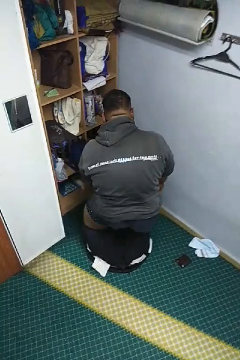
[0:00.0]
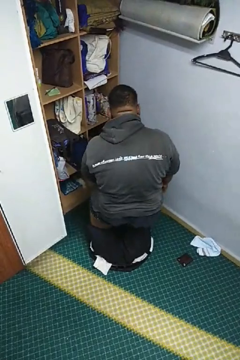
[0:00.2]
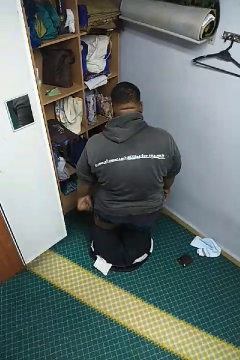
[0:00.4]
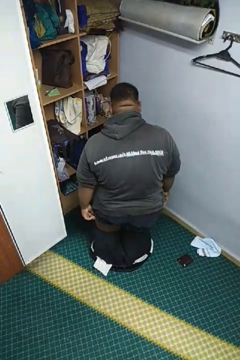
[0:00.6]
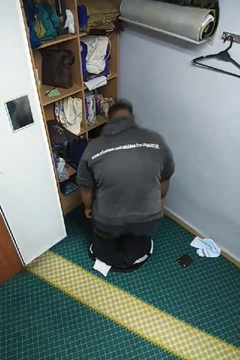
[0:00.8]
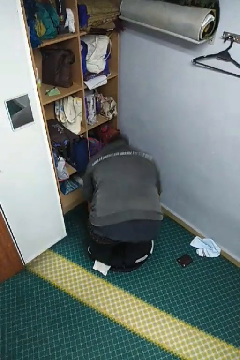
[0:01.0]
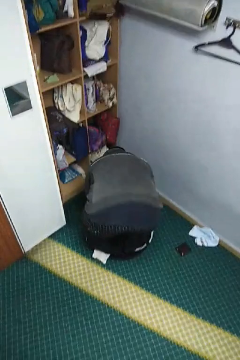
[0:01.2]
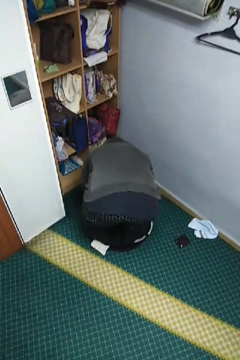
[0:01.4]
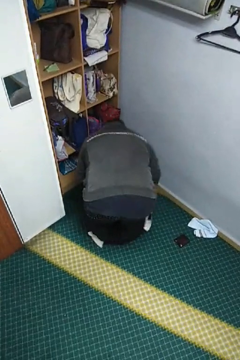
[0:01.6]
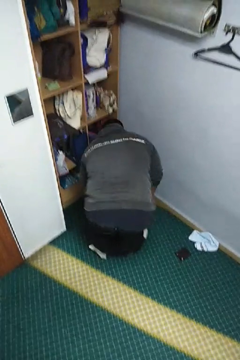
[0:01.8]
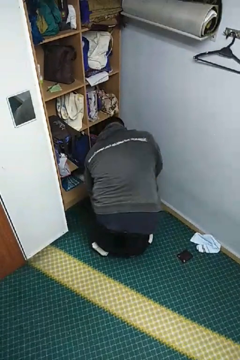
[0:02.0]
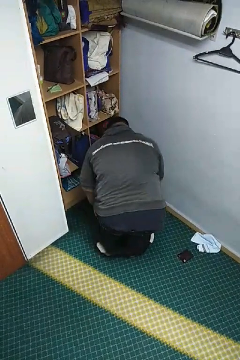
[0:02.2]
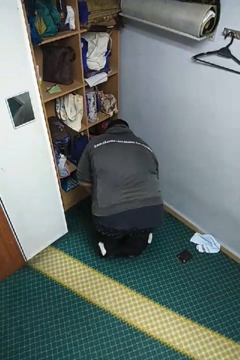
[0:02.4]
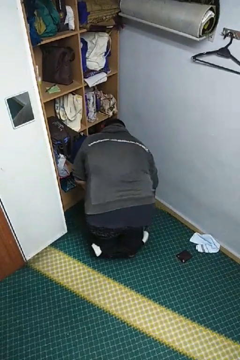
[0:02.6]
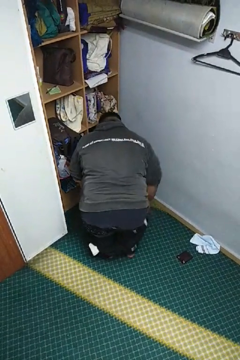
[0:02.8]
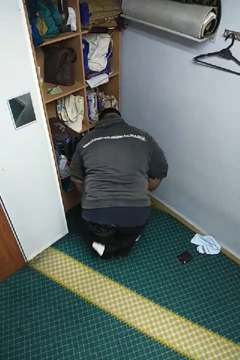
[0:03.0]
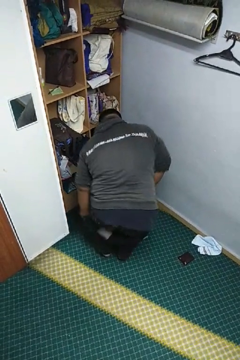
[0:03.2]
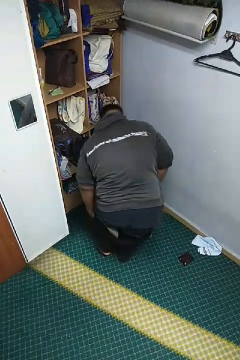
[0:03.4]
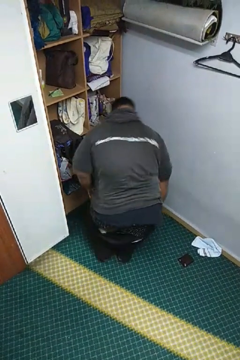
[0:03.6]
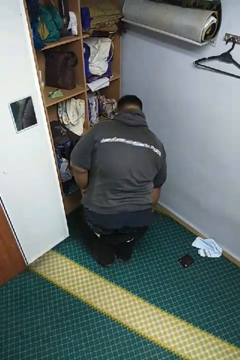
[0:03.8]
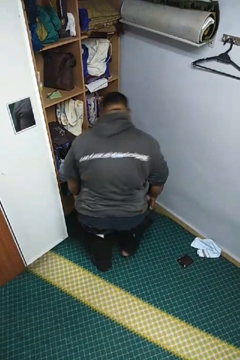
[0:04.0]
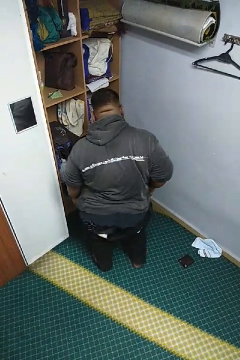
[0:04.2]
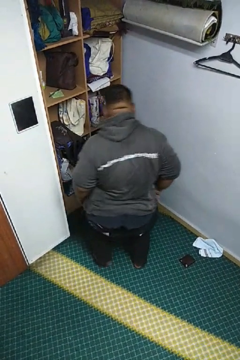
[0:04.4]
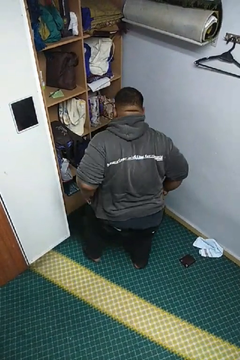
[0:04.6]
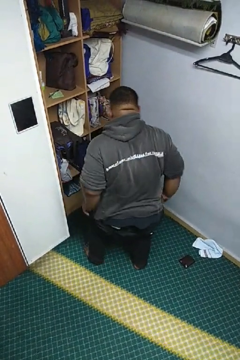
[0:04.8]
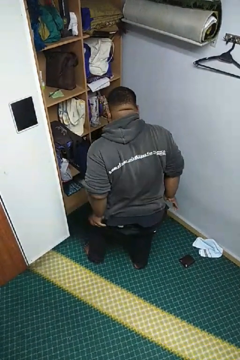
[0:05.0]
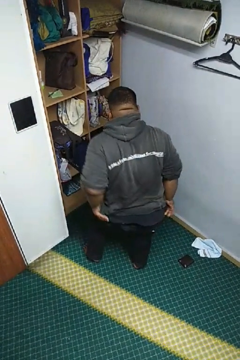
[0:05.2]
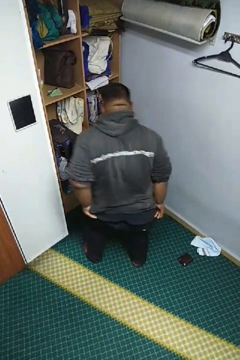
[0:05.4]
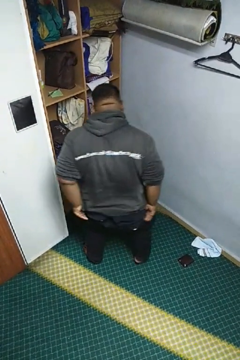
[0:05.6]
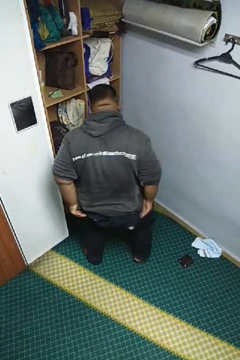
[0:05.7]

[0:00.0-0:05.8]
person puts on pants

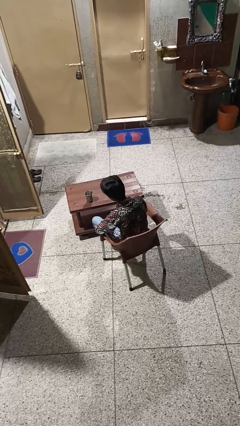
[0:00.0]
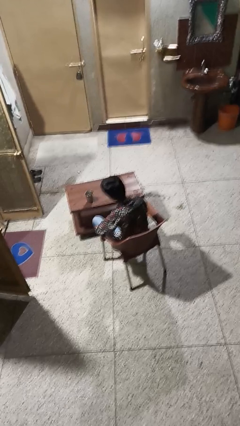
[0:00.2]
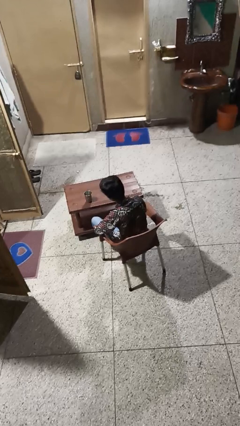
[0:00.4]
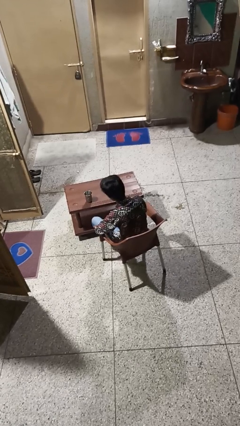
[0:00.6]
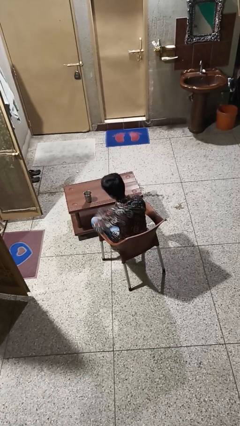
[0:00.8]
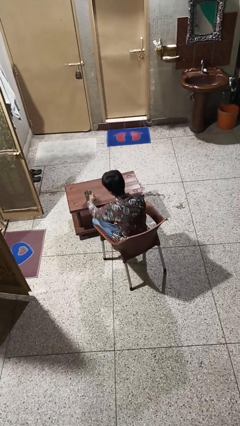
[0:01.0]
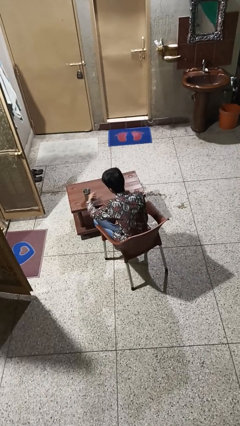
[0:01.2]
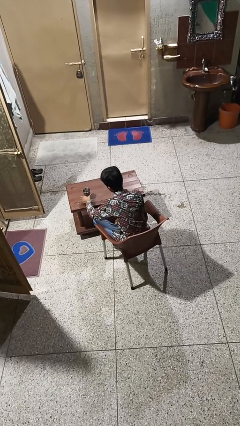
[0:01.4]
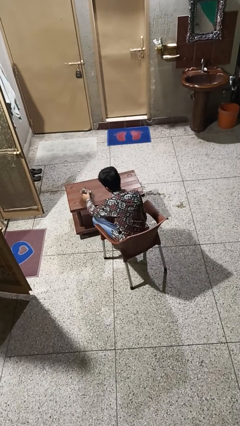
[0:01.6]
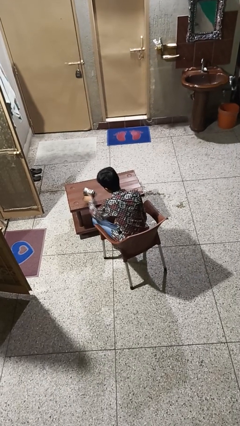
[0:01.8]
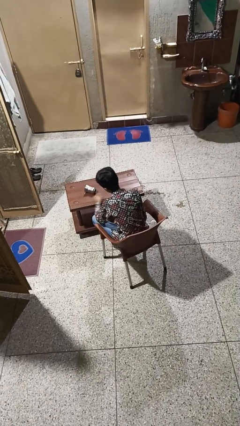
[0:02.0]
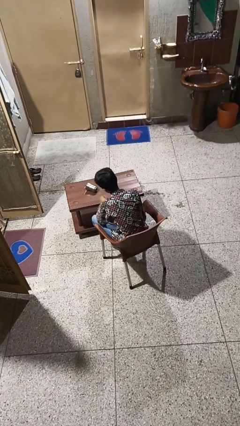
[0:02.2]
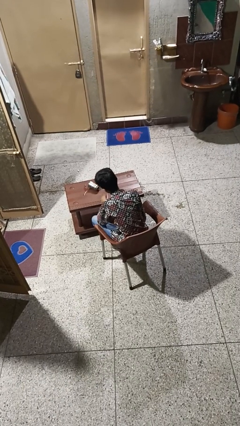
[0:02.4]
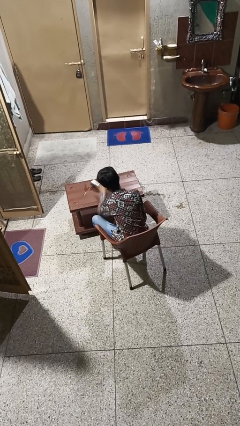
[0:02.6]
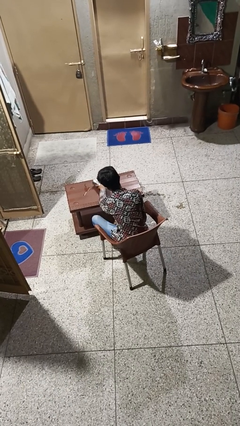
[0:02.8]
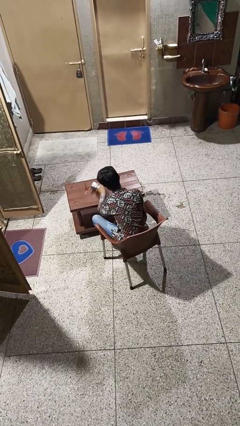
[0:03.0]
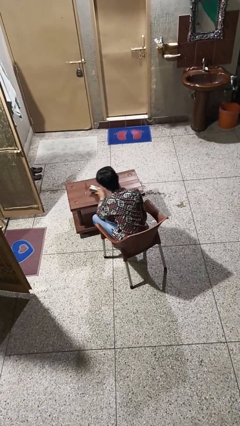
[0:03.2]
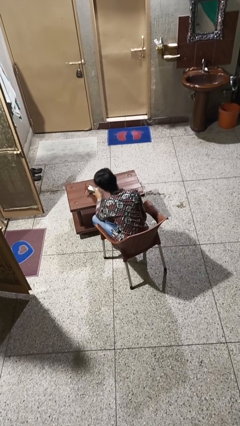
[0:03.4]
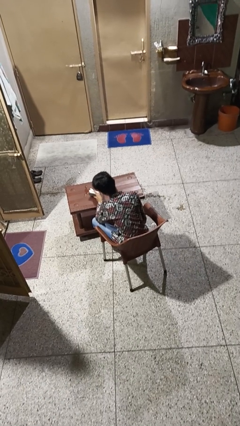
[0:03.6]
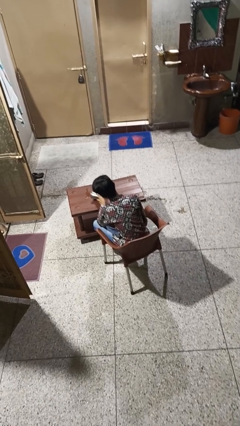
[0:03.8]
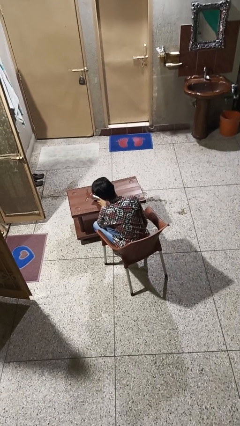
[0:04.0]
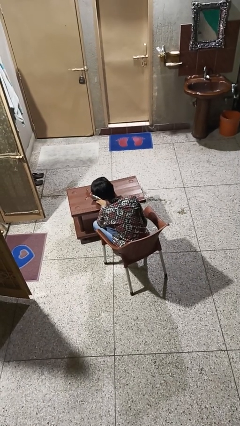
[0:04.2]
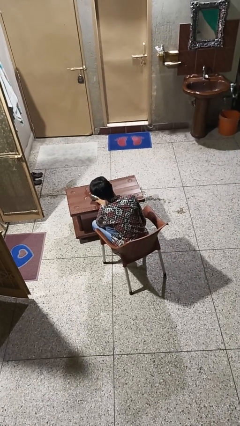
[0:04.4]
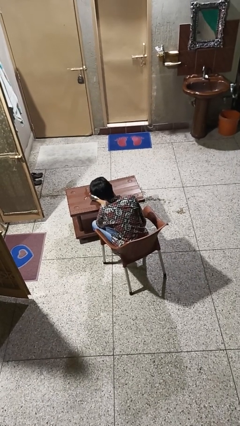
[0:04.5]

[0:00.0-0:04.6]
person spills on table

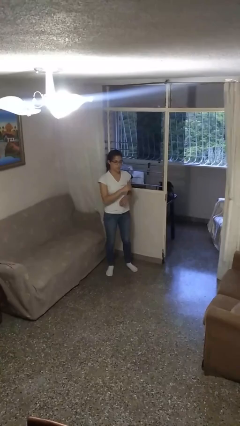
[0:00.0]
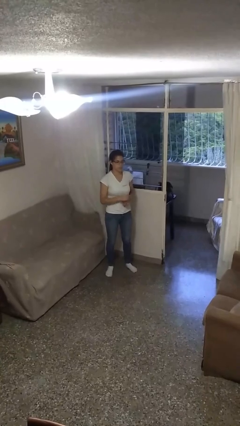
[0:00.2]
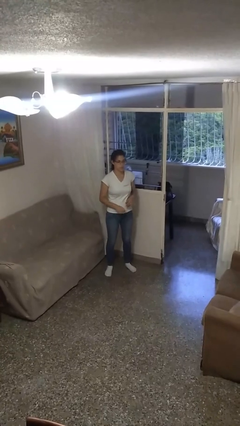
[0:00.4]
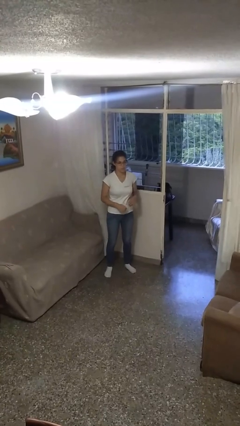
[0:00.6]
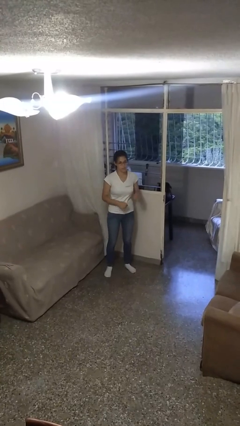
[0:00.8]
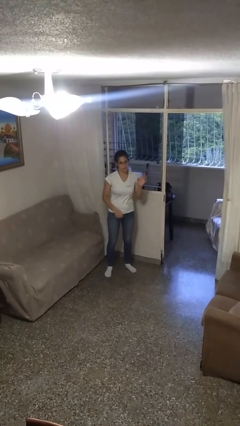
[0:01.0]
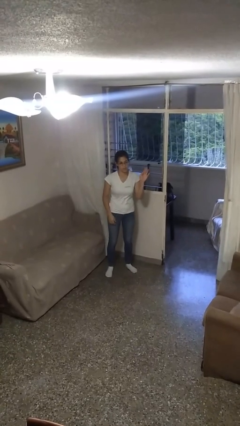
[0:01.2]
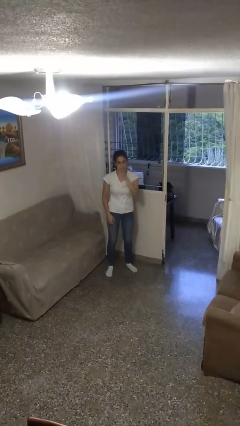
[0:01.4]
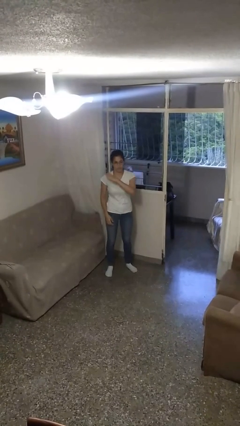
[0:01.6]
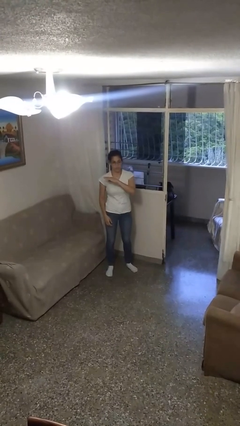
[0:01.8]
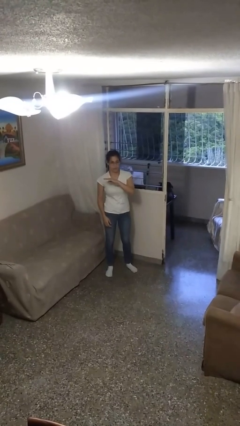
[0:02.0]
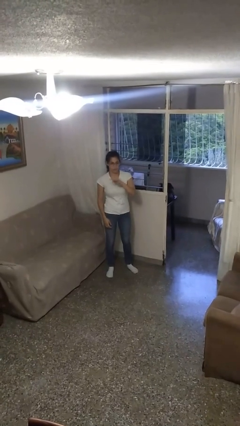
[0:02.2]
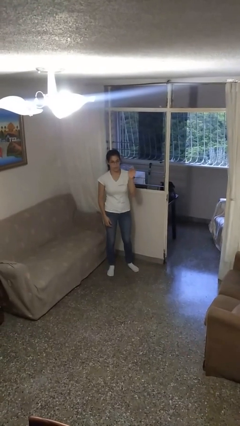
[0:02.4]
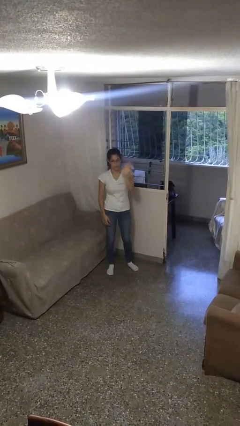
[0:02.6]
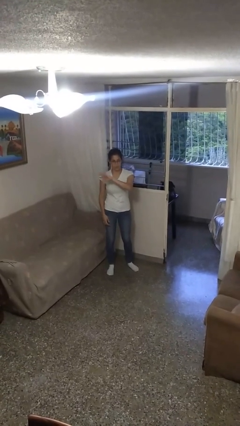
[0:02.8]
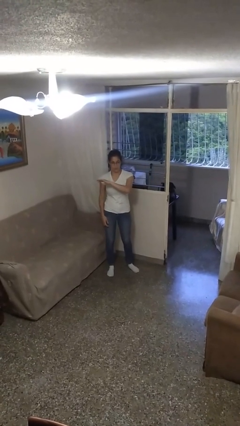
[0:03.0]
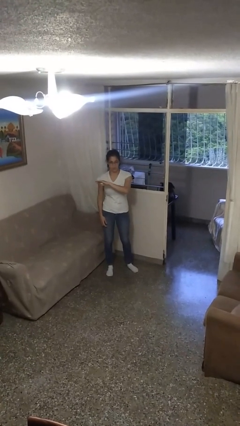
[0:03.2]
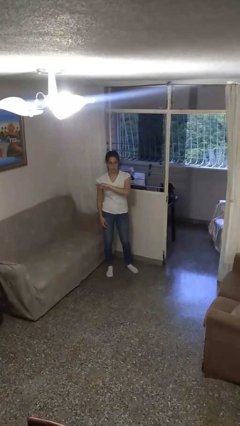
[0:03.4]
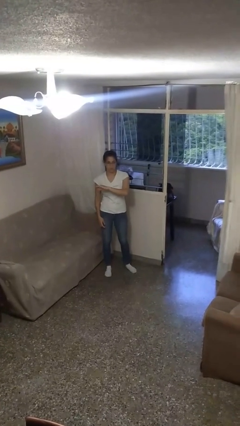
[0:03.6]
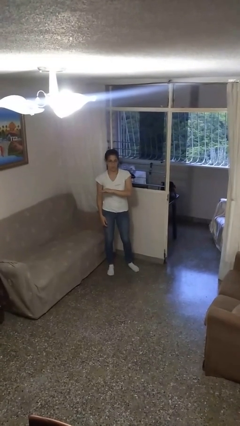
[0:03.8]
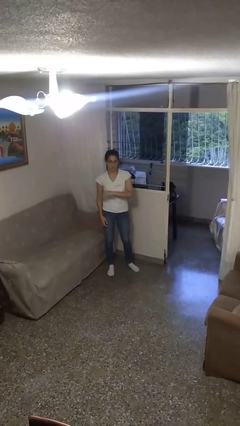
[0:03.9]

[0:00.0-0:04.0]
person gestures swipe right

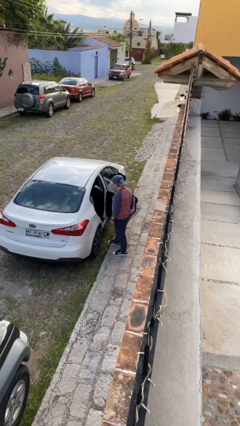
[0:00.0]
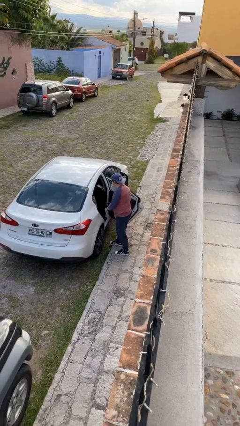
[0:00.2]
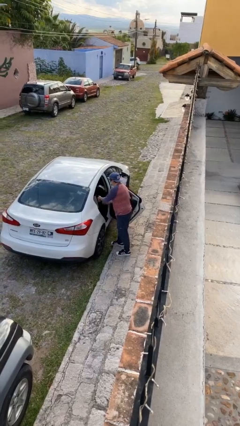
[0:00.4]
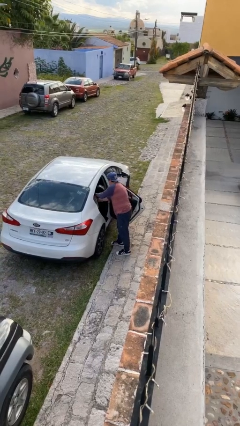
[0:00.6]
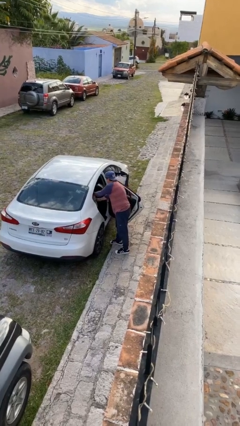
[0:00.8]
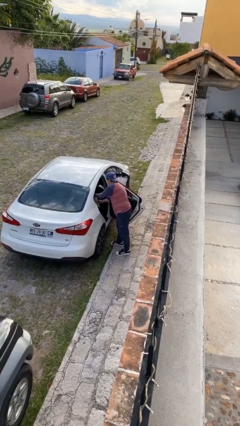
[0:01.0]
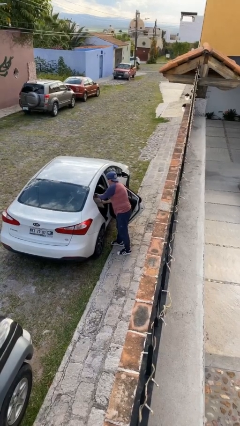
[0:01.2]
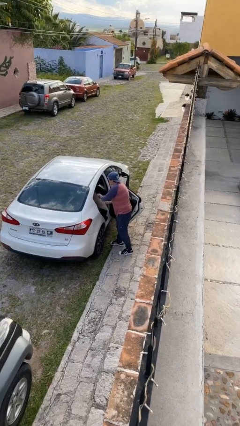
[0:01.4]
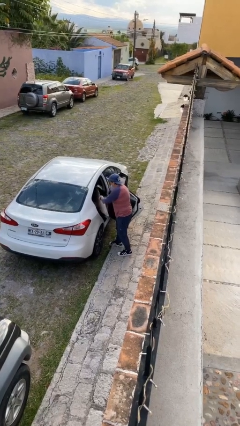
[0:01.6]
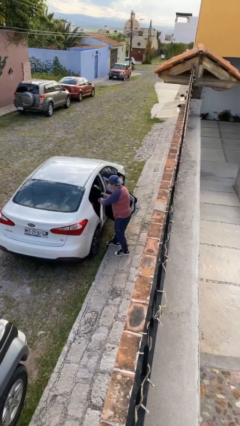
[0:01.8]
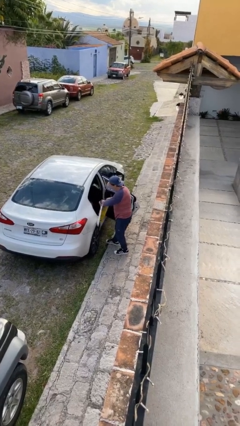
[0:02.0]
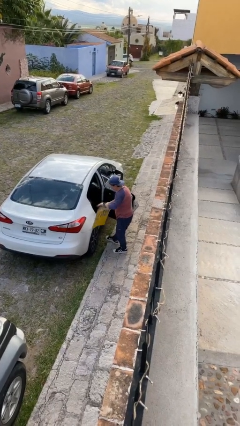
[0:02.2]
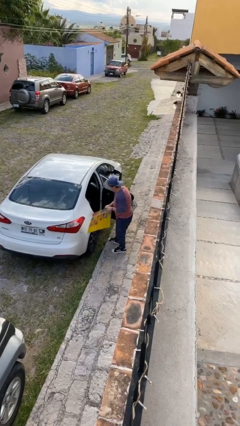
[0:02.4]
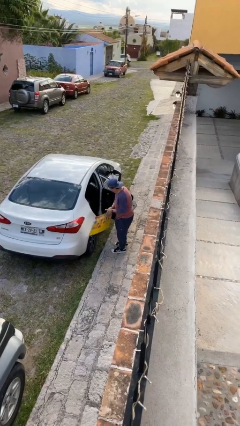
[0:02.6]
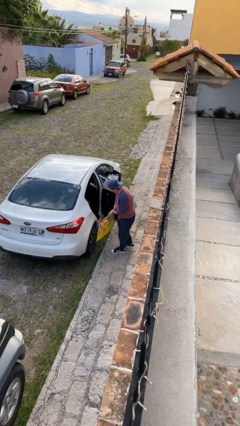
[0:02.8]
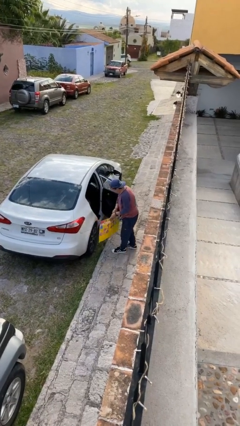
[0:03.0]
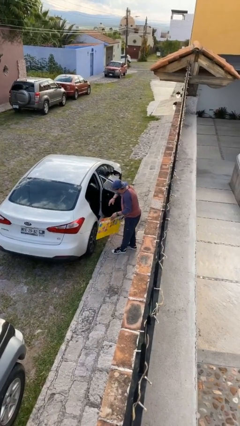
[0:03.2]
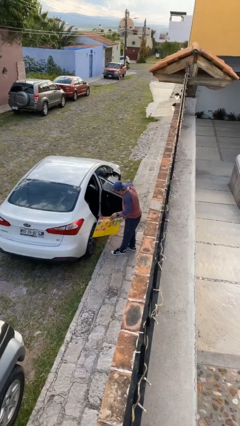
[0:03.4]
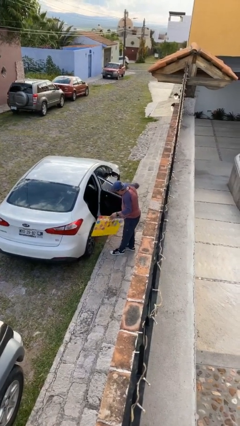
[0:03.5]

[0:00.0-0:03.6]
person unloads car

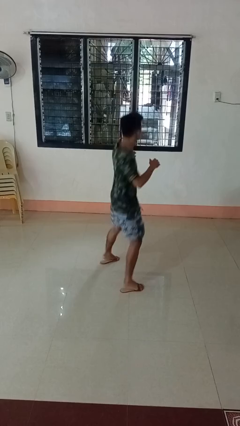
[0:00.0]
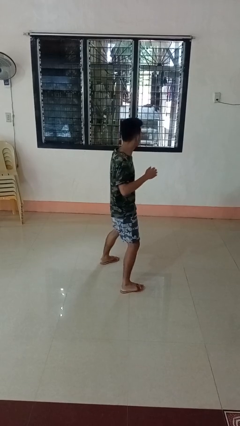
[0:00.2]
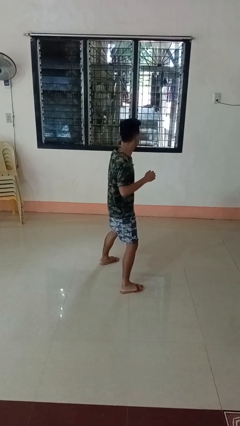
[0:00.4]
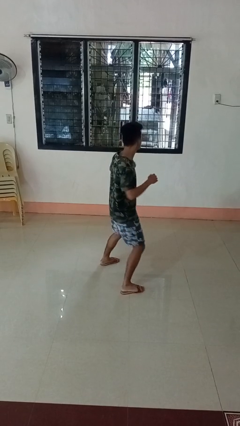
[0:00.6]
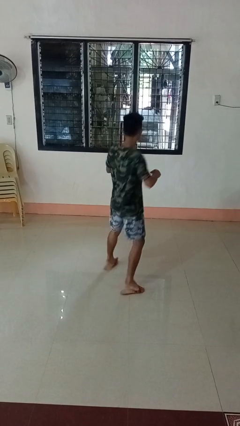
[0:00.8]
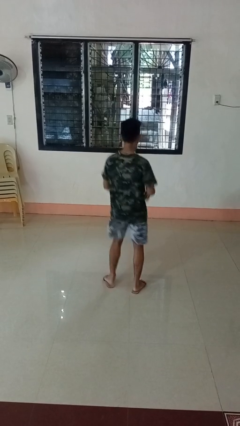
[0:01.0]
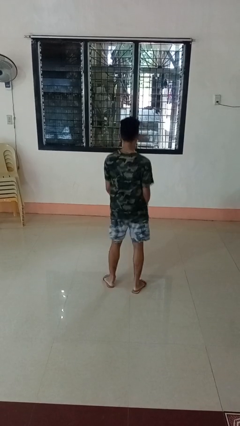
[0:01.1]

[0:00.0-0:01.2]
person karate chop
